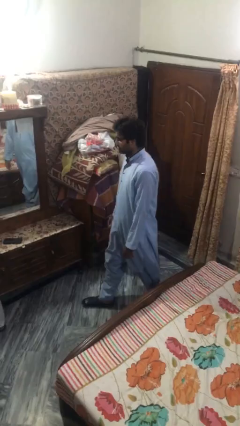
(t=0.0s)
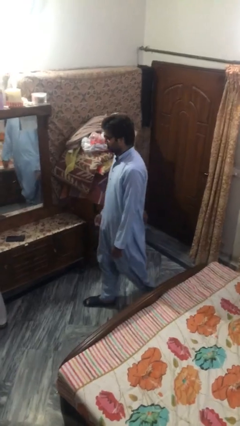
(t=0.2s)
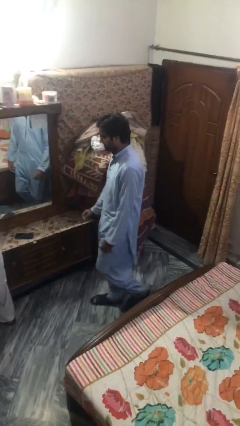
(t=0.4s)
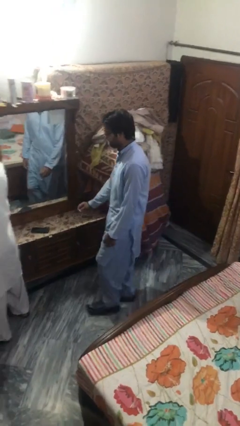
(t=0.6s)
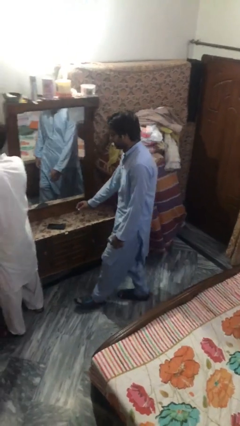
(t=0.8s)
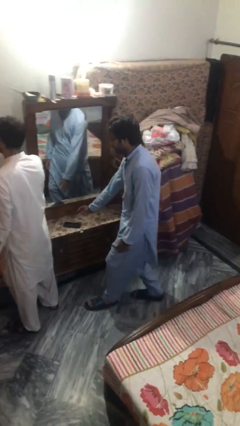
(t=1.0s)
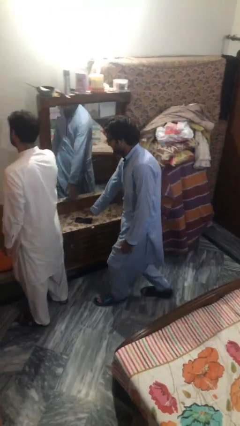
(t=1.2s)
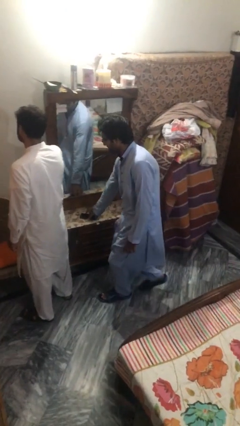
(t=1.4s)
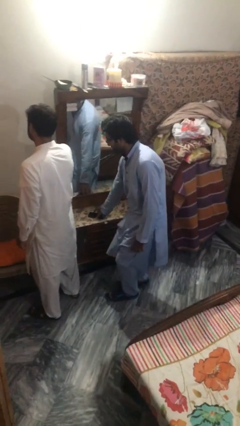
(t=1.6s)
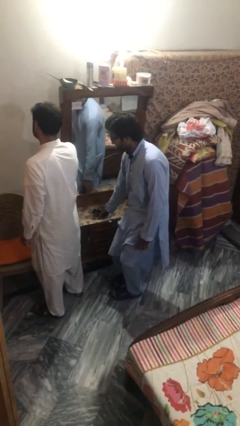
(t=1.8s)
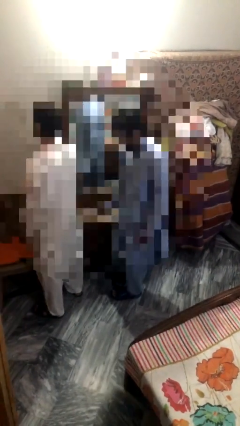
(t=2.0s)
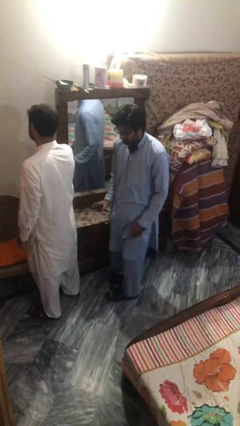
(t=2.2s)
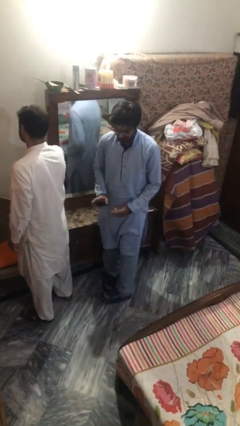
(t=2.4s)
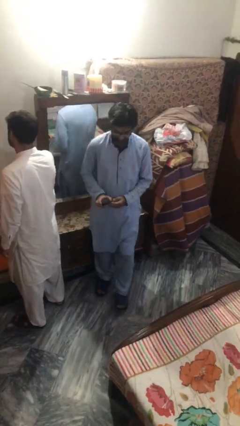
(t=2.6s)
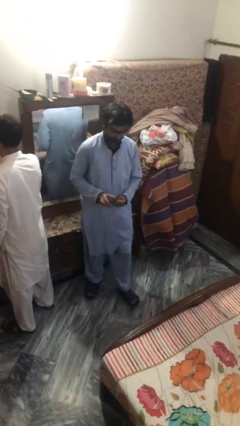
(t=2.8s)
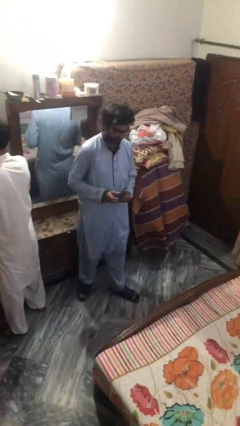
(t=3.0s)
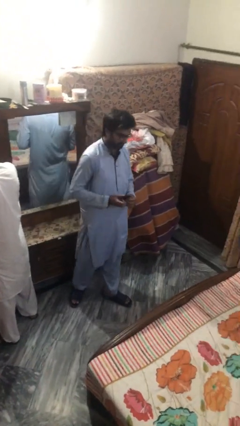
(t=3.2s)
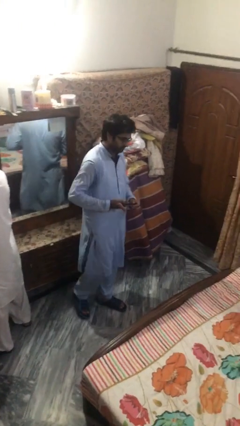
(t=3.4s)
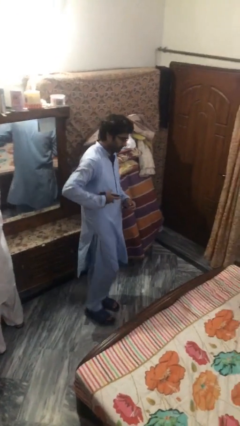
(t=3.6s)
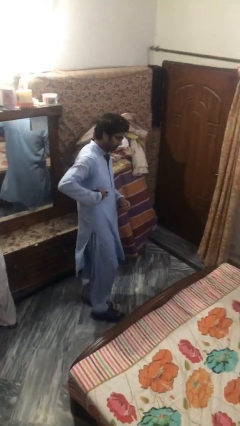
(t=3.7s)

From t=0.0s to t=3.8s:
person steals object from person

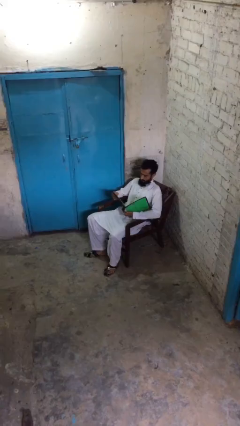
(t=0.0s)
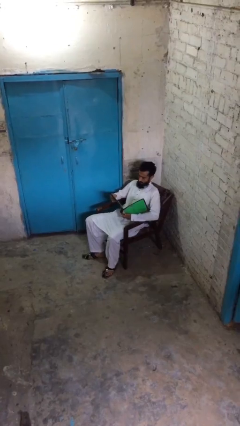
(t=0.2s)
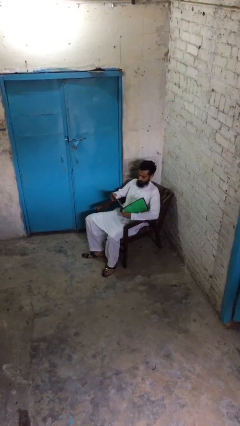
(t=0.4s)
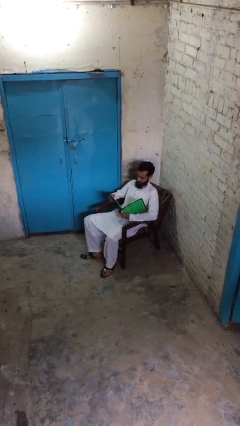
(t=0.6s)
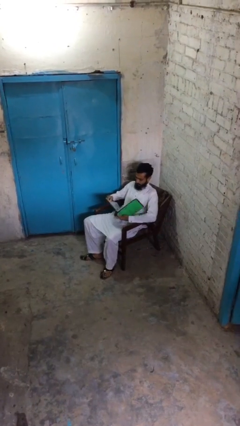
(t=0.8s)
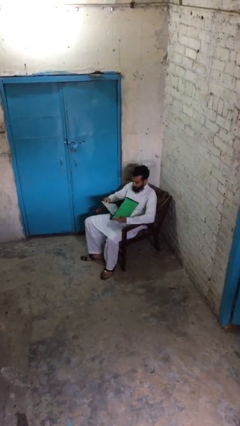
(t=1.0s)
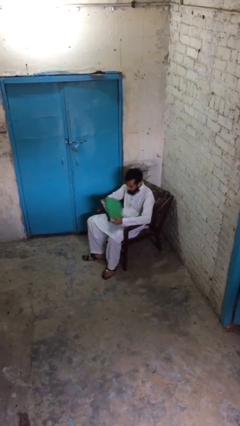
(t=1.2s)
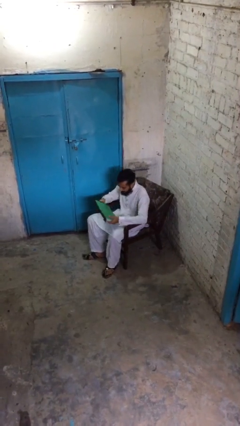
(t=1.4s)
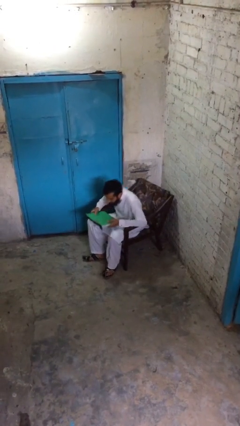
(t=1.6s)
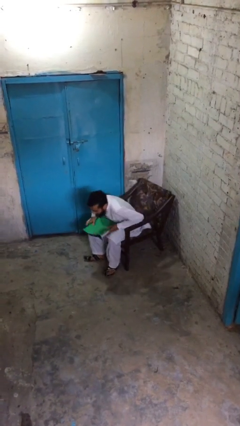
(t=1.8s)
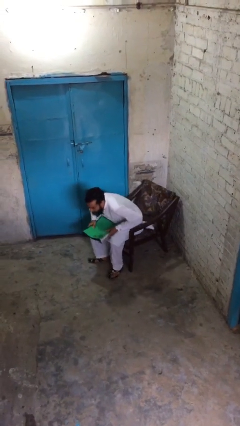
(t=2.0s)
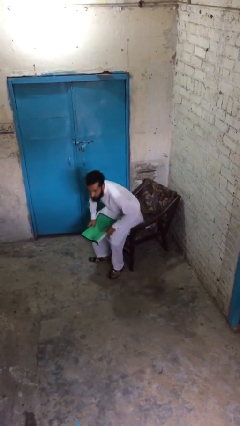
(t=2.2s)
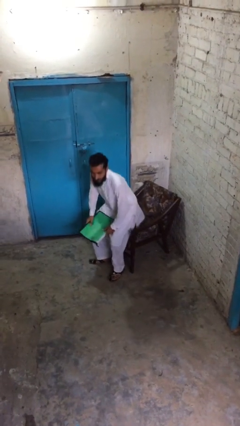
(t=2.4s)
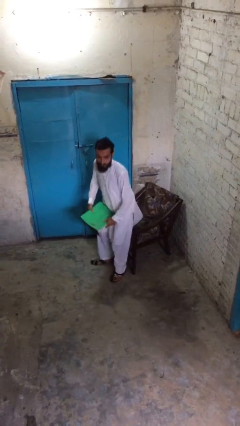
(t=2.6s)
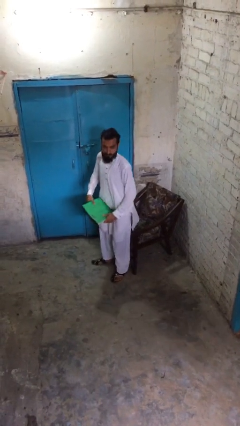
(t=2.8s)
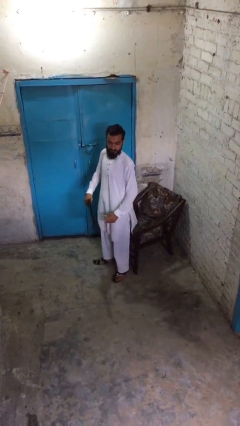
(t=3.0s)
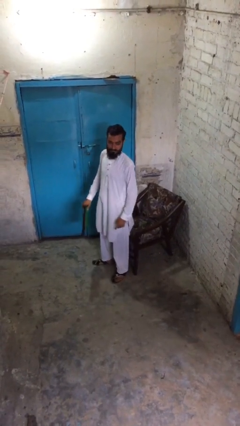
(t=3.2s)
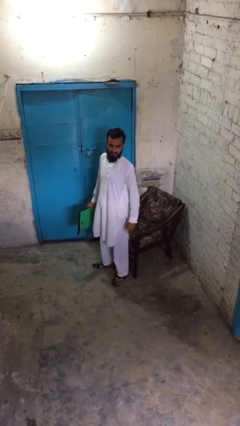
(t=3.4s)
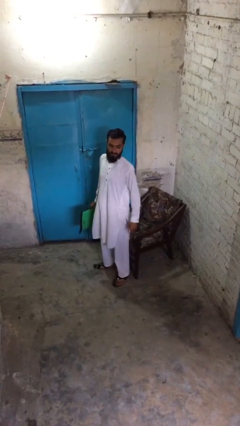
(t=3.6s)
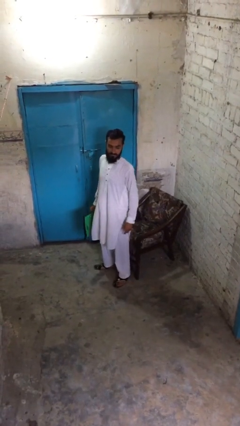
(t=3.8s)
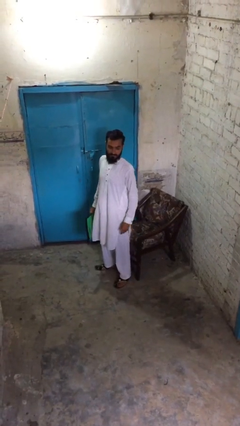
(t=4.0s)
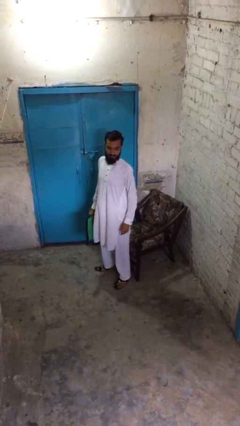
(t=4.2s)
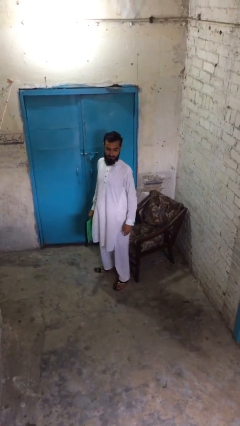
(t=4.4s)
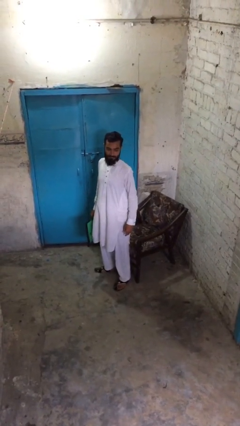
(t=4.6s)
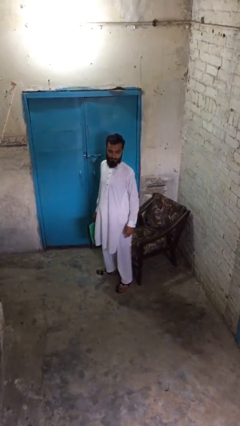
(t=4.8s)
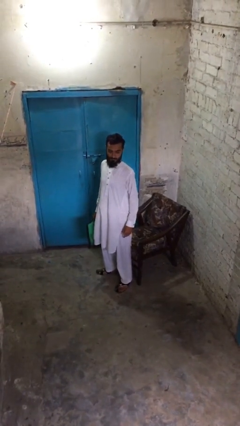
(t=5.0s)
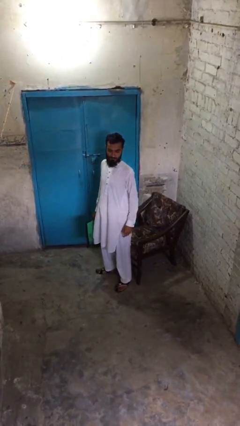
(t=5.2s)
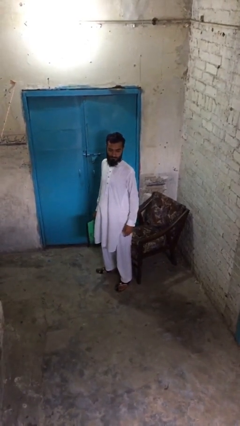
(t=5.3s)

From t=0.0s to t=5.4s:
person stands up

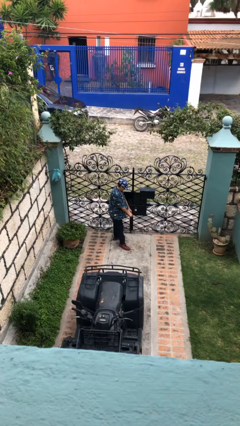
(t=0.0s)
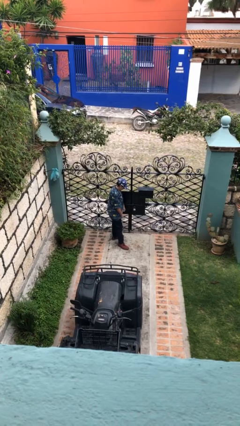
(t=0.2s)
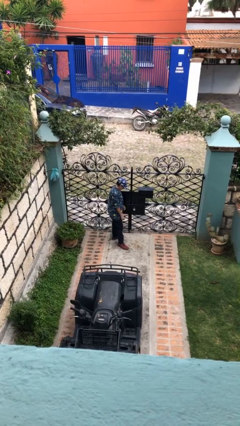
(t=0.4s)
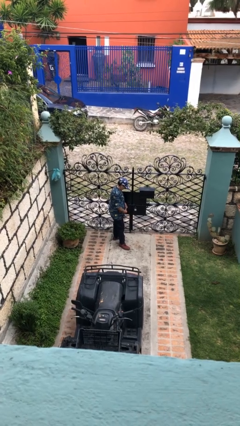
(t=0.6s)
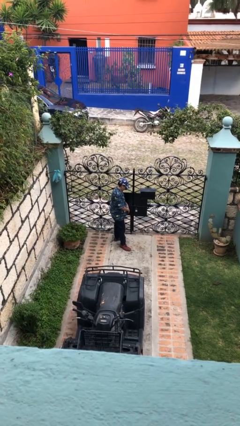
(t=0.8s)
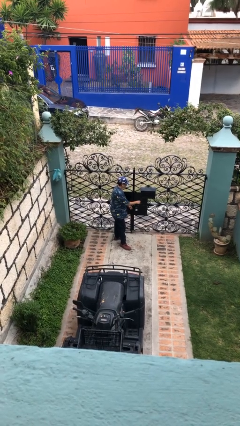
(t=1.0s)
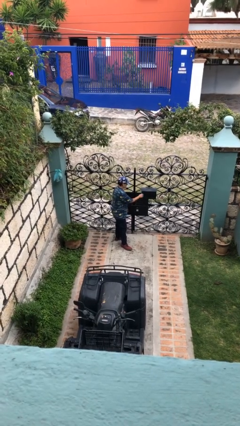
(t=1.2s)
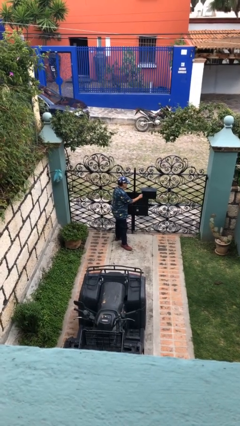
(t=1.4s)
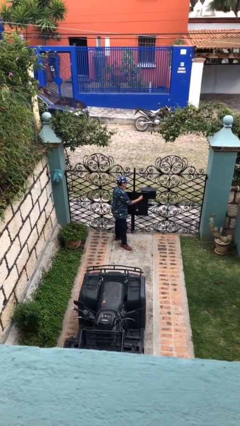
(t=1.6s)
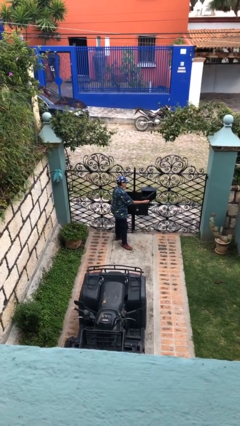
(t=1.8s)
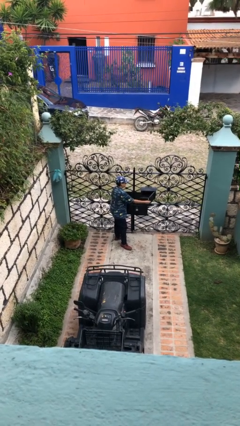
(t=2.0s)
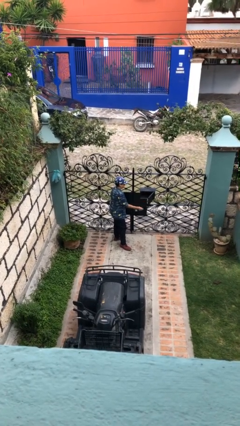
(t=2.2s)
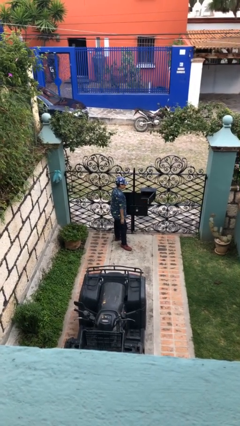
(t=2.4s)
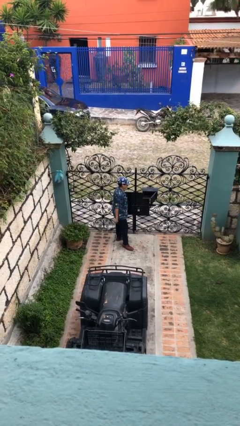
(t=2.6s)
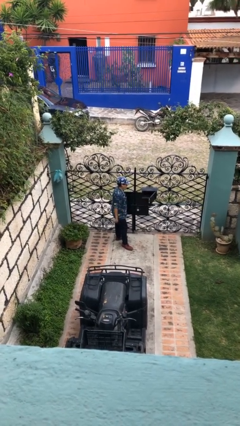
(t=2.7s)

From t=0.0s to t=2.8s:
person opens mailbox

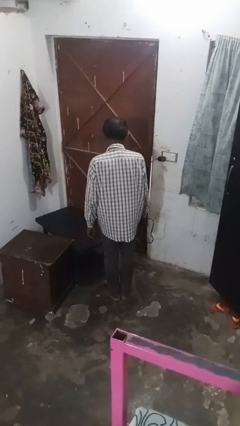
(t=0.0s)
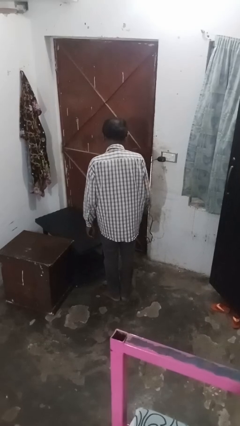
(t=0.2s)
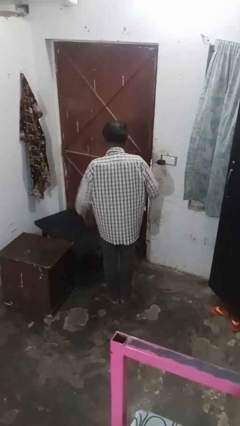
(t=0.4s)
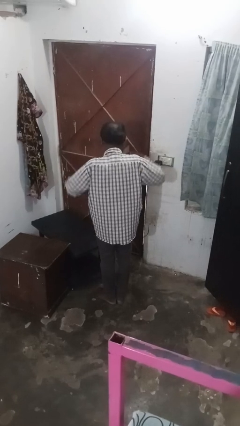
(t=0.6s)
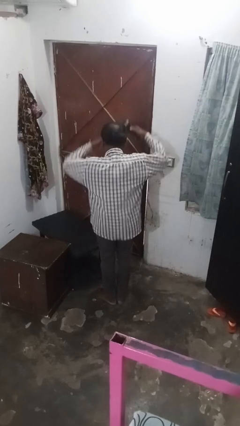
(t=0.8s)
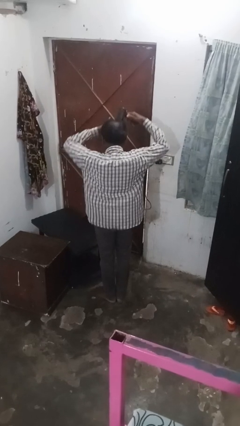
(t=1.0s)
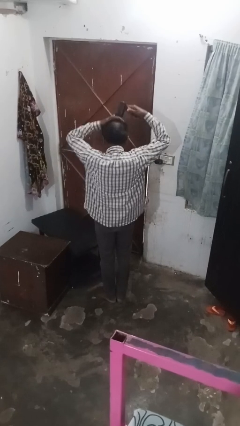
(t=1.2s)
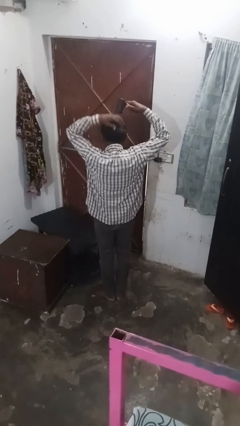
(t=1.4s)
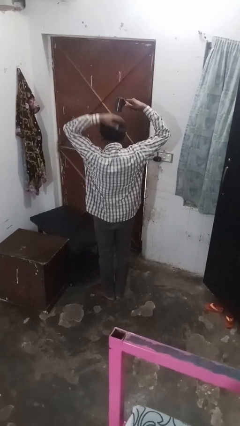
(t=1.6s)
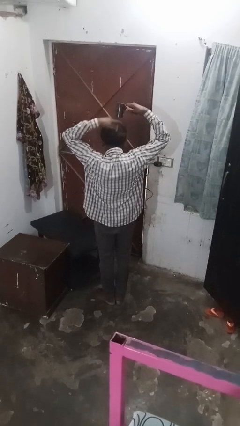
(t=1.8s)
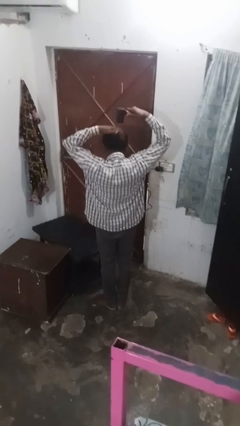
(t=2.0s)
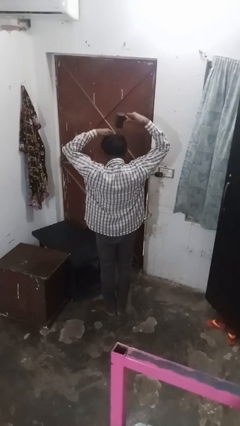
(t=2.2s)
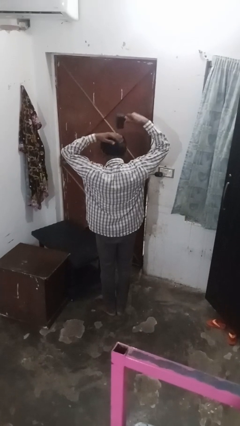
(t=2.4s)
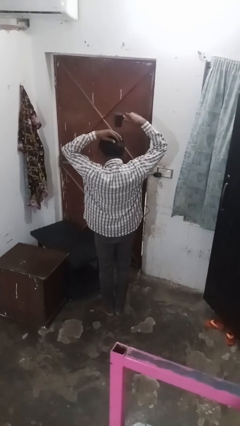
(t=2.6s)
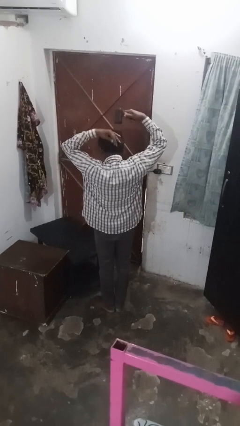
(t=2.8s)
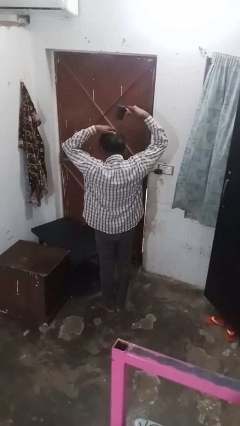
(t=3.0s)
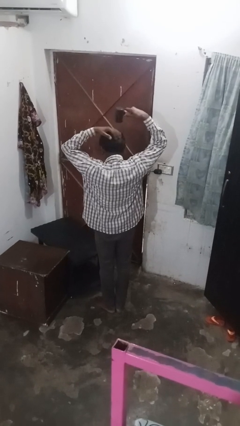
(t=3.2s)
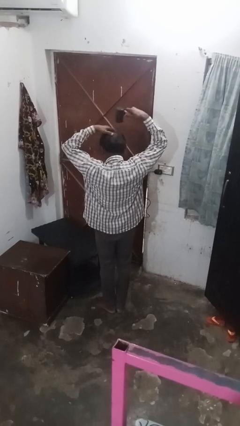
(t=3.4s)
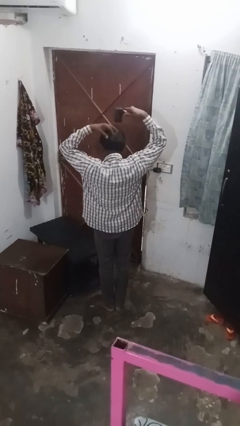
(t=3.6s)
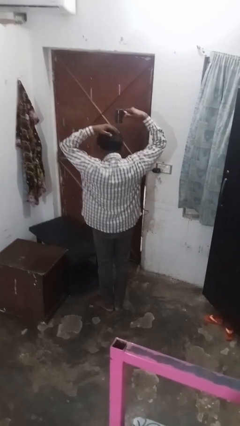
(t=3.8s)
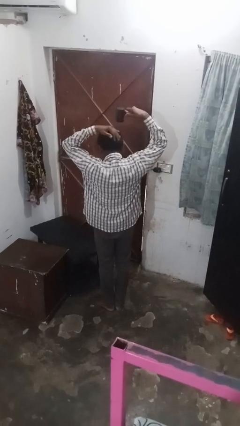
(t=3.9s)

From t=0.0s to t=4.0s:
person dries hair with towel

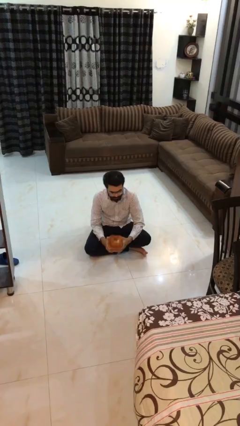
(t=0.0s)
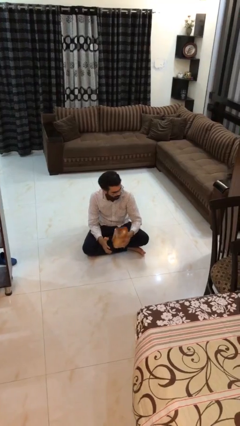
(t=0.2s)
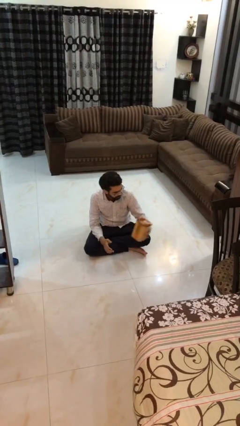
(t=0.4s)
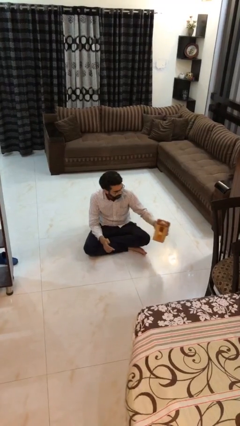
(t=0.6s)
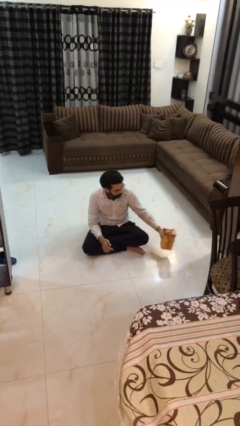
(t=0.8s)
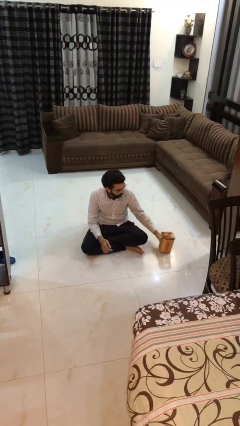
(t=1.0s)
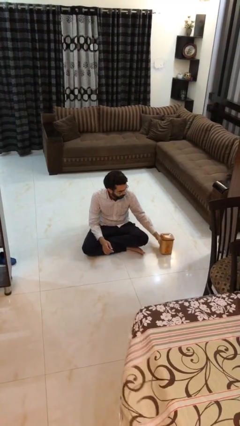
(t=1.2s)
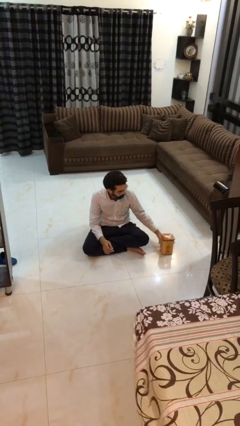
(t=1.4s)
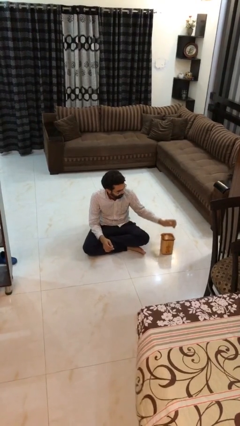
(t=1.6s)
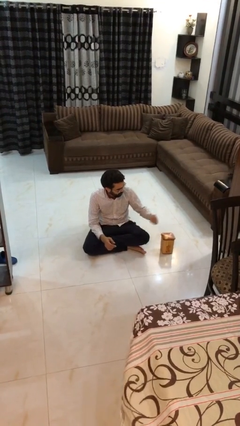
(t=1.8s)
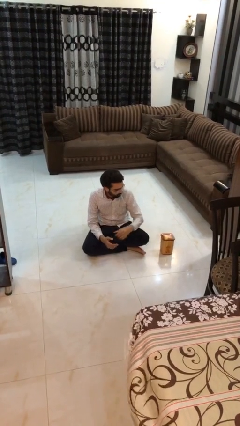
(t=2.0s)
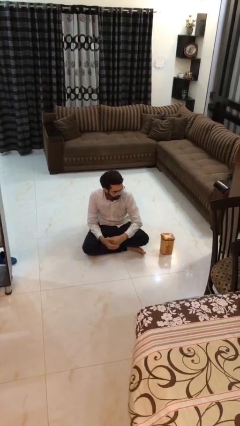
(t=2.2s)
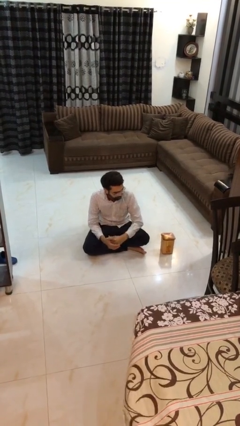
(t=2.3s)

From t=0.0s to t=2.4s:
person puts down object on floor
